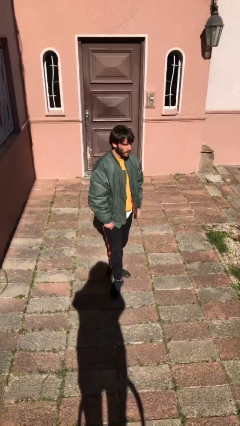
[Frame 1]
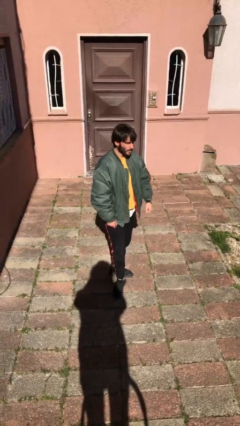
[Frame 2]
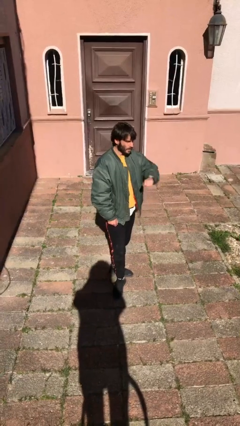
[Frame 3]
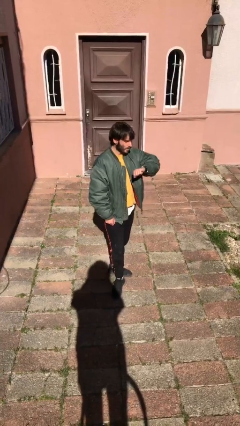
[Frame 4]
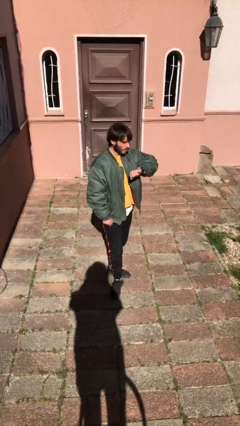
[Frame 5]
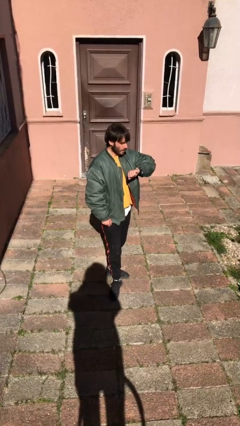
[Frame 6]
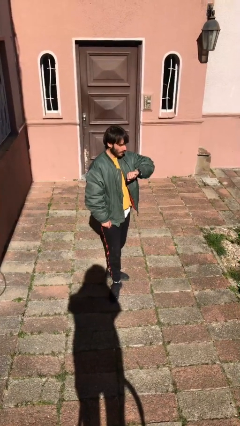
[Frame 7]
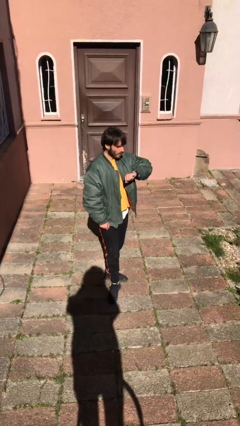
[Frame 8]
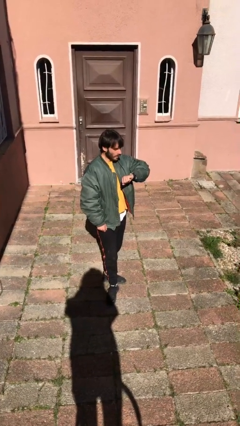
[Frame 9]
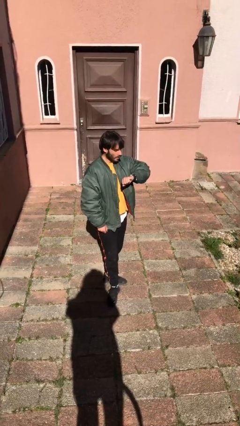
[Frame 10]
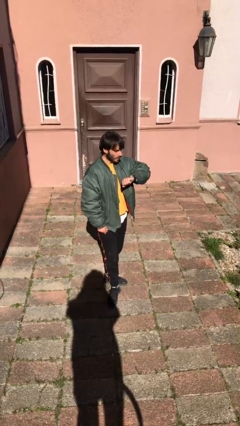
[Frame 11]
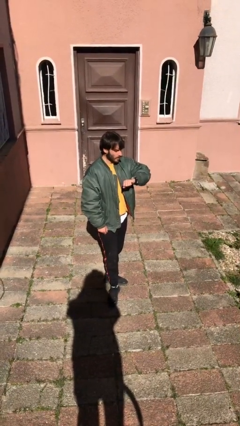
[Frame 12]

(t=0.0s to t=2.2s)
person looks at wristwatch

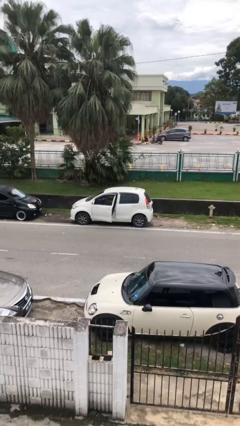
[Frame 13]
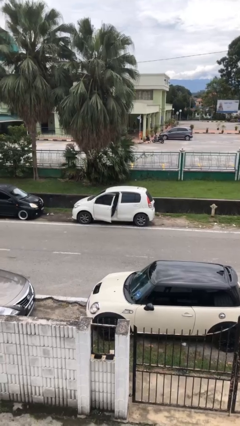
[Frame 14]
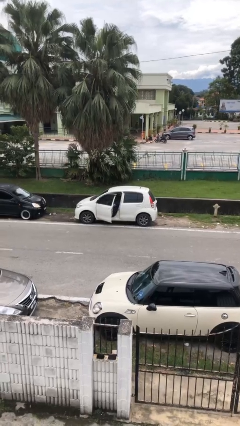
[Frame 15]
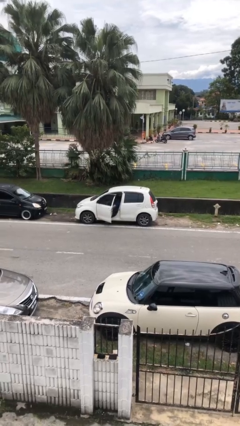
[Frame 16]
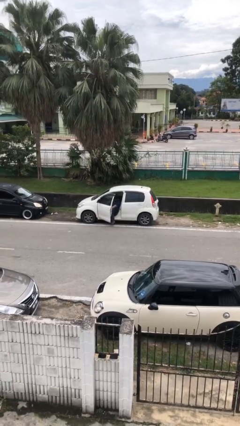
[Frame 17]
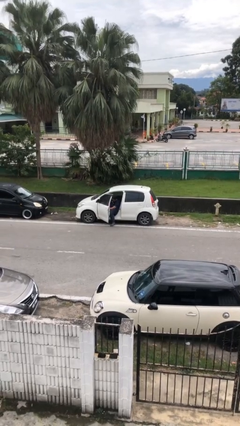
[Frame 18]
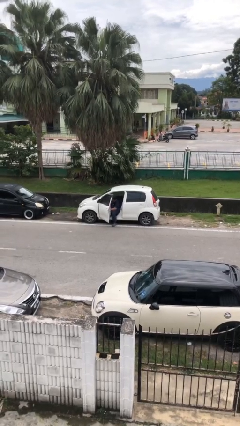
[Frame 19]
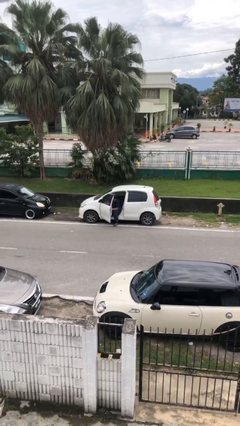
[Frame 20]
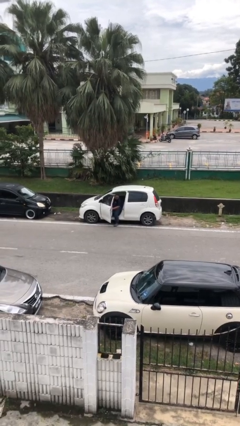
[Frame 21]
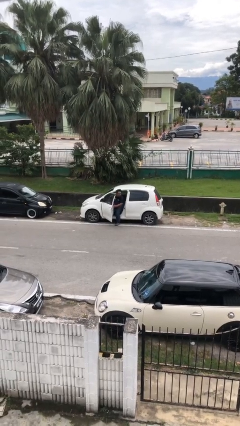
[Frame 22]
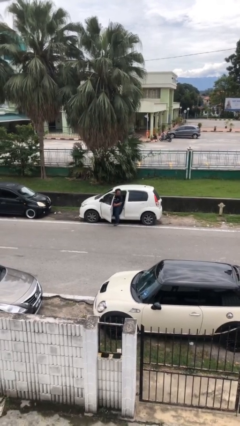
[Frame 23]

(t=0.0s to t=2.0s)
person opens car door

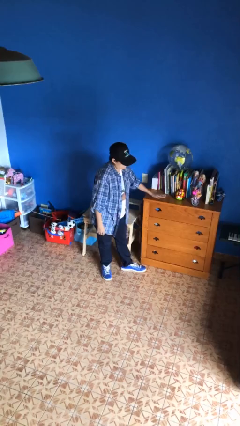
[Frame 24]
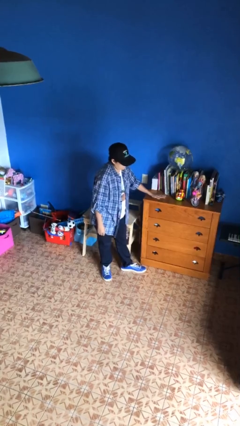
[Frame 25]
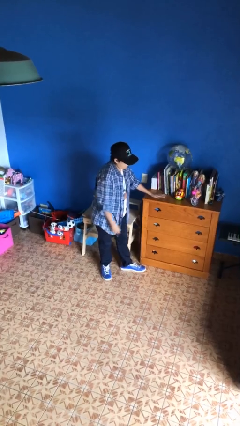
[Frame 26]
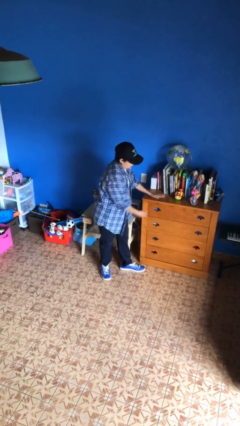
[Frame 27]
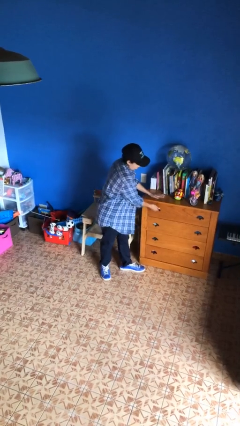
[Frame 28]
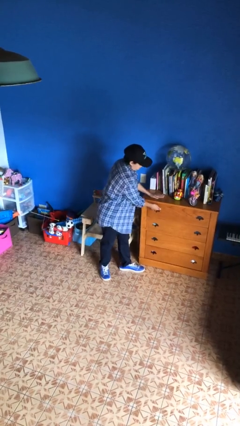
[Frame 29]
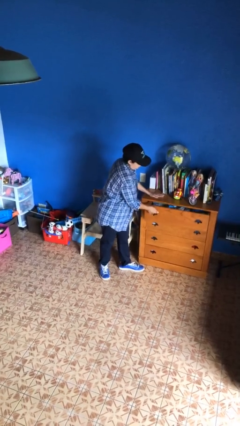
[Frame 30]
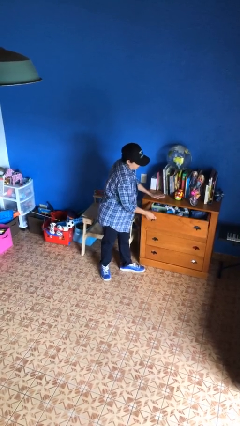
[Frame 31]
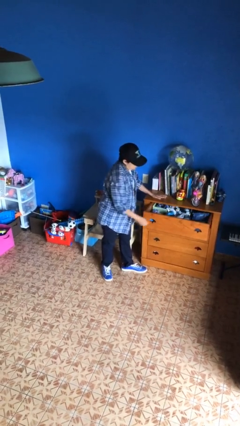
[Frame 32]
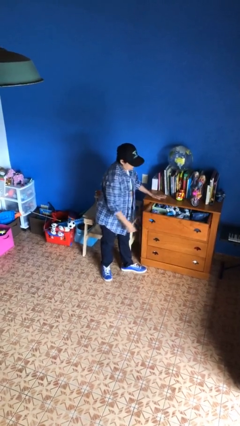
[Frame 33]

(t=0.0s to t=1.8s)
person opens dresser drawer

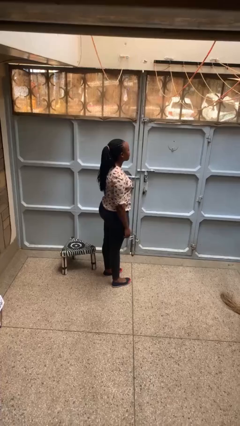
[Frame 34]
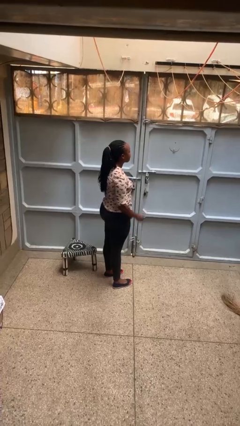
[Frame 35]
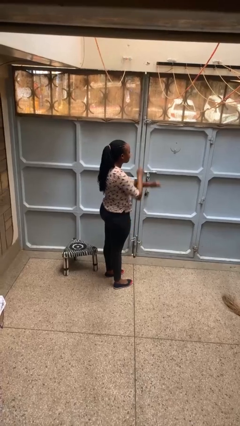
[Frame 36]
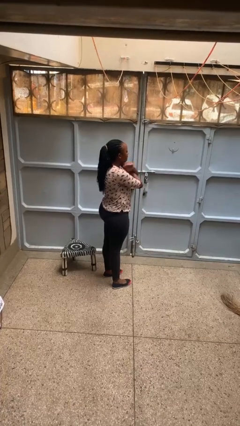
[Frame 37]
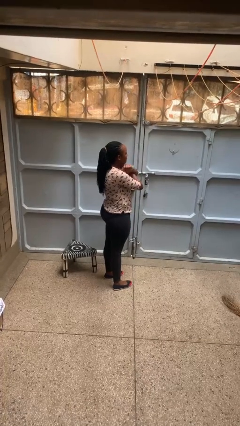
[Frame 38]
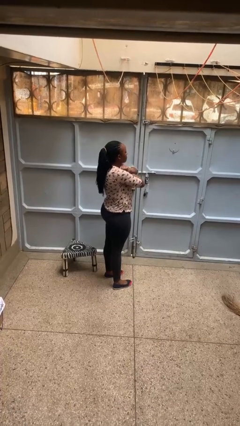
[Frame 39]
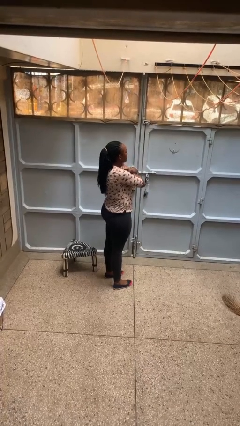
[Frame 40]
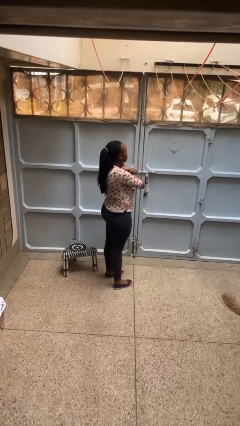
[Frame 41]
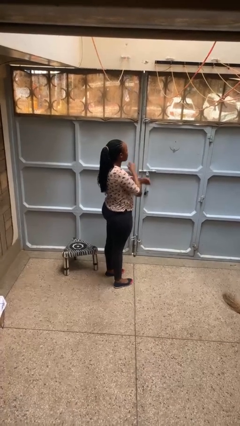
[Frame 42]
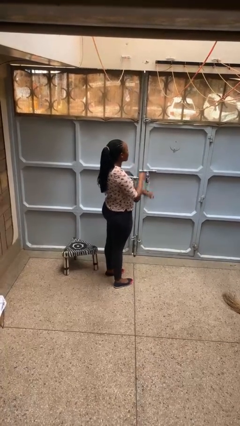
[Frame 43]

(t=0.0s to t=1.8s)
person gestures arms x

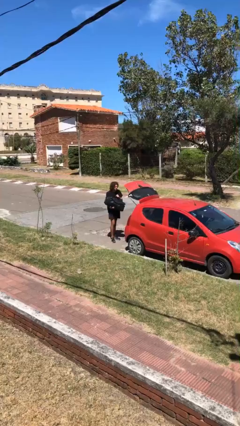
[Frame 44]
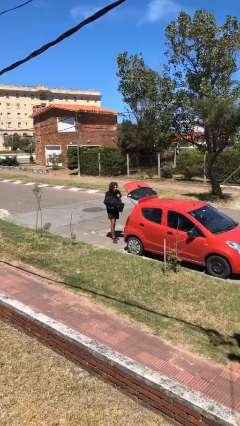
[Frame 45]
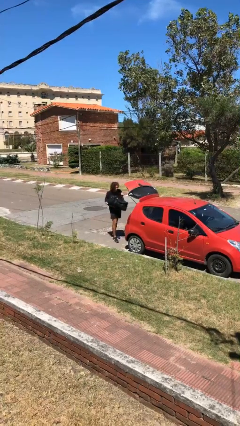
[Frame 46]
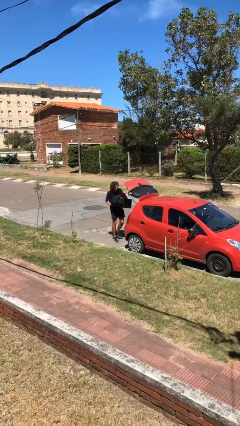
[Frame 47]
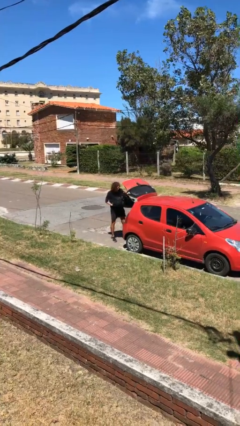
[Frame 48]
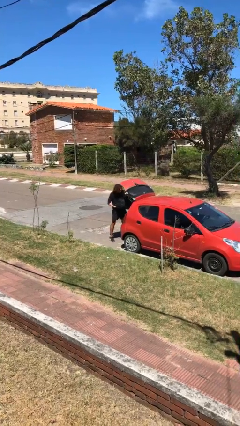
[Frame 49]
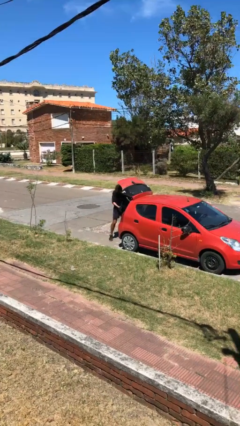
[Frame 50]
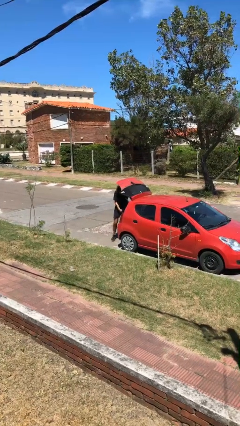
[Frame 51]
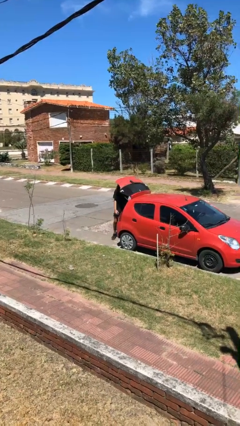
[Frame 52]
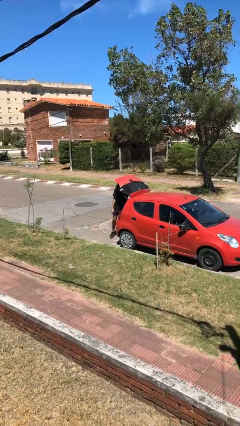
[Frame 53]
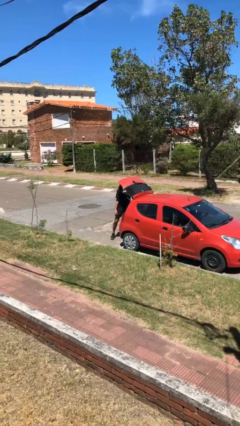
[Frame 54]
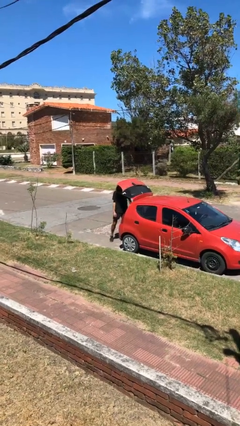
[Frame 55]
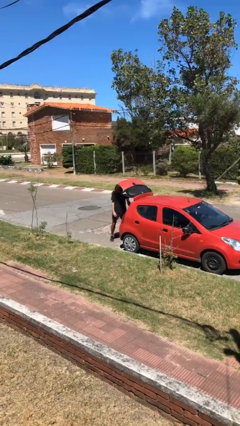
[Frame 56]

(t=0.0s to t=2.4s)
person loads car

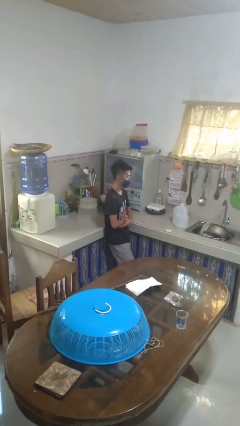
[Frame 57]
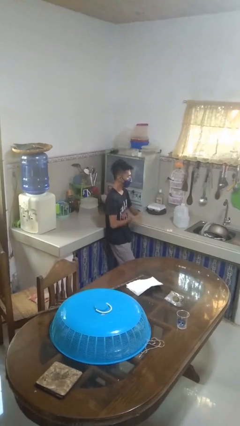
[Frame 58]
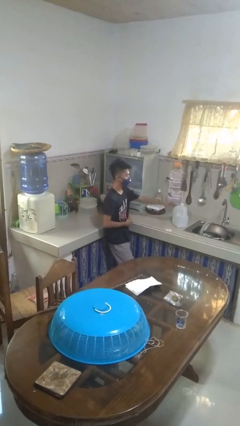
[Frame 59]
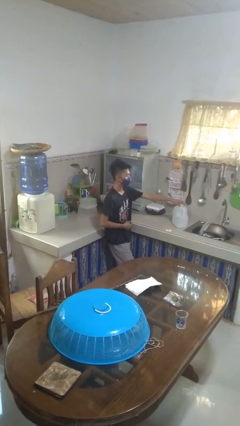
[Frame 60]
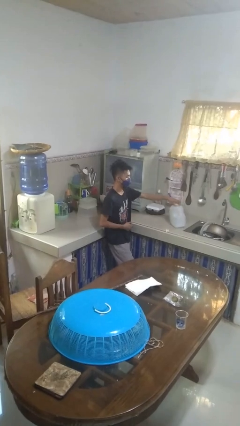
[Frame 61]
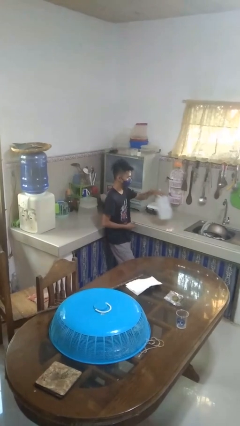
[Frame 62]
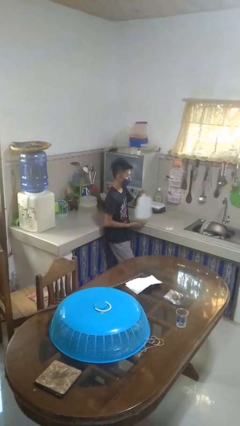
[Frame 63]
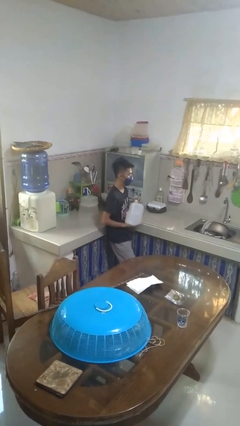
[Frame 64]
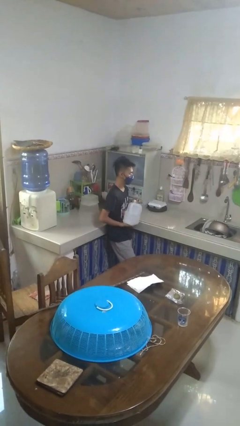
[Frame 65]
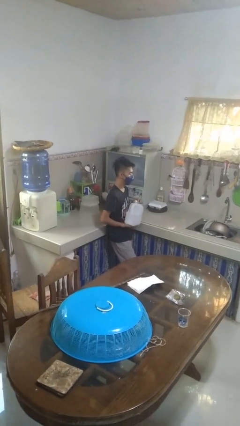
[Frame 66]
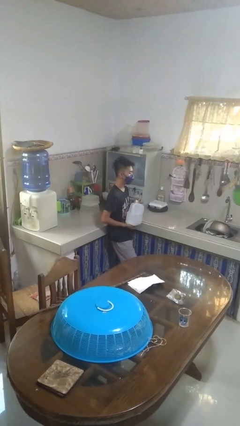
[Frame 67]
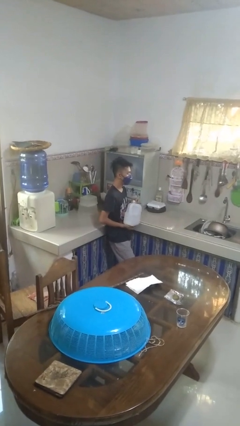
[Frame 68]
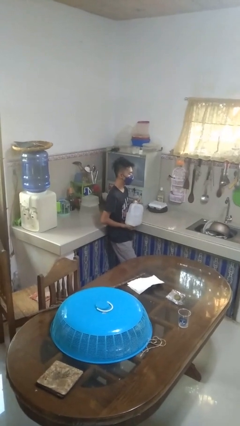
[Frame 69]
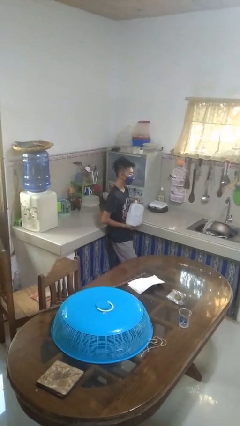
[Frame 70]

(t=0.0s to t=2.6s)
person picks up object from countertop

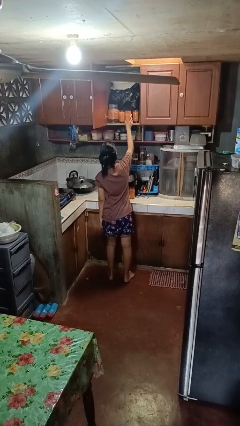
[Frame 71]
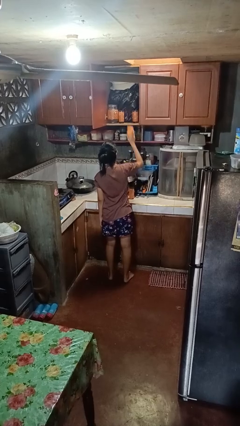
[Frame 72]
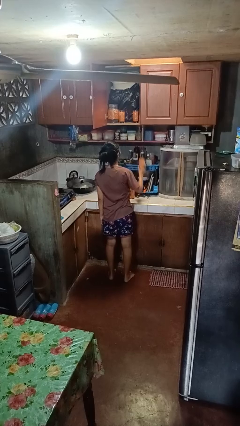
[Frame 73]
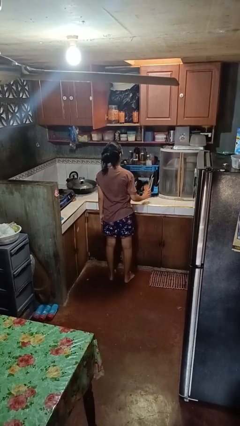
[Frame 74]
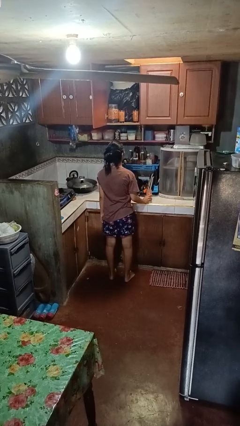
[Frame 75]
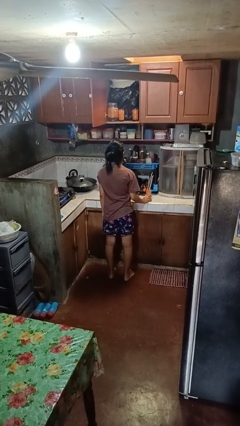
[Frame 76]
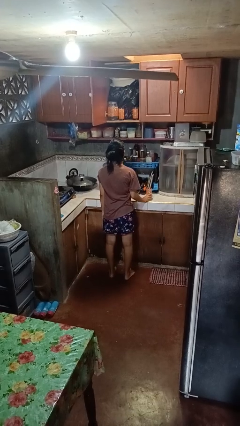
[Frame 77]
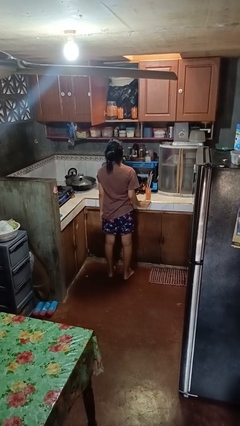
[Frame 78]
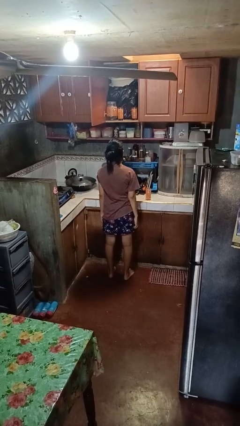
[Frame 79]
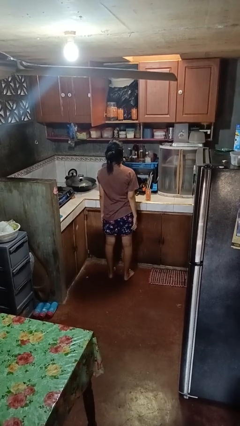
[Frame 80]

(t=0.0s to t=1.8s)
person takes object from cabinet

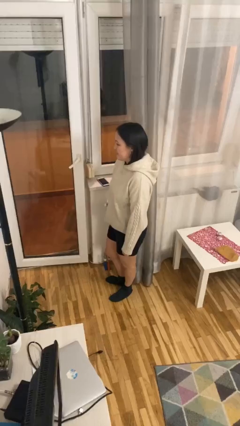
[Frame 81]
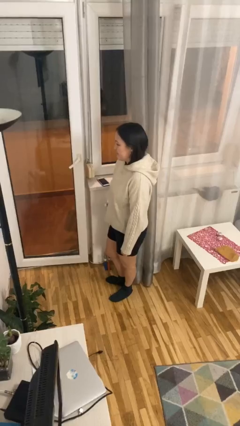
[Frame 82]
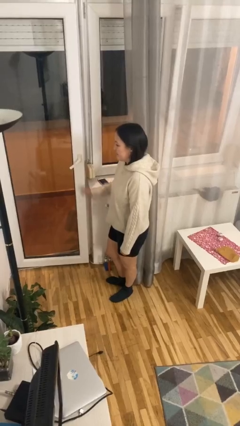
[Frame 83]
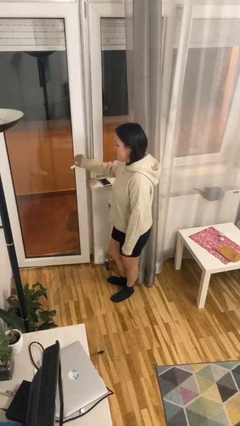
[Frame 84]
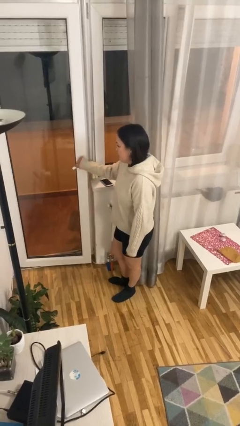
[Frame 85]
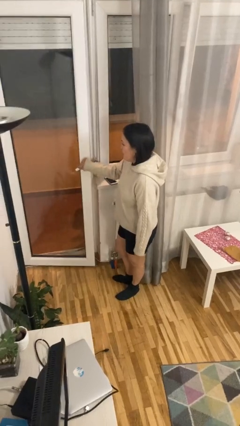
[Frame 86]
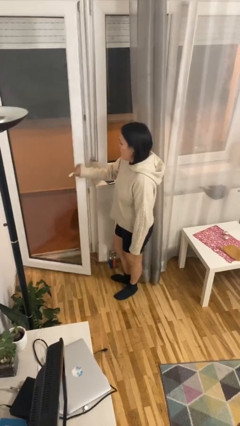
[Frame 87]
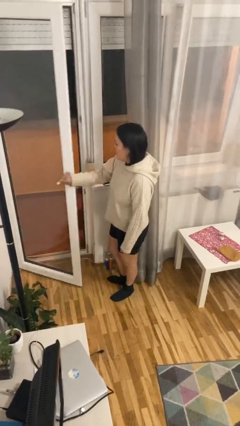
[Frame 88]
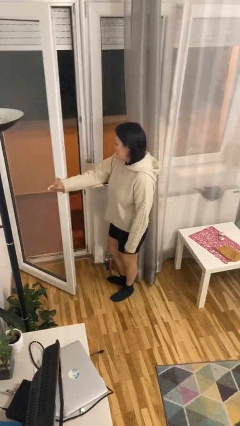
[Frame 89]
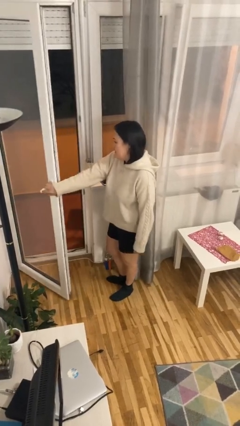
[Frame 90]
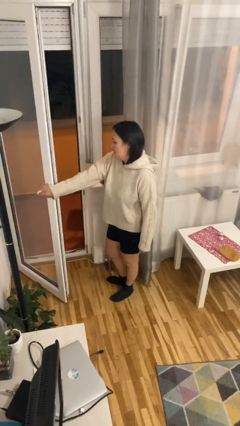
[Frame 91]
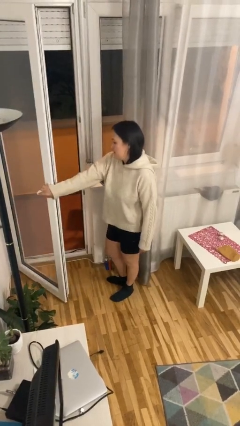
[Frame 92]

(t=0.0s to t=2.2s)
person opens facility door
